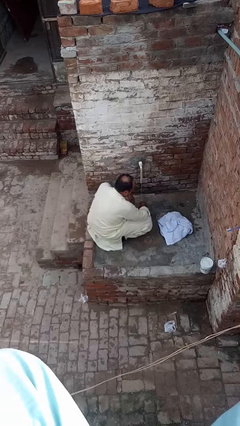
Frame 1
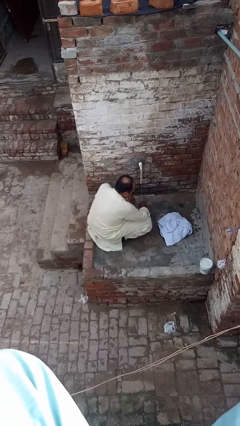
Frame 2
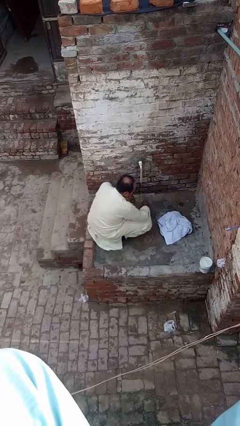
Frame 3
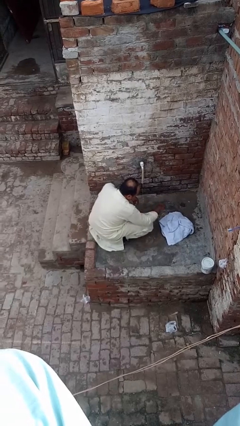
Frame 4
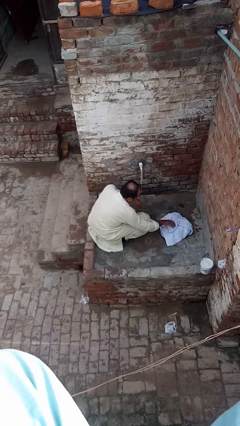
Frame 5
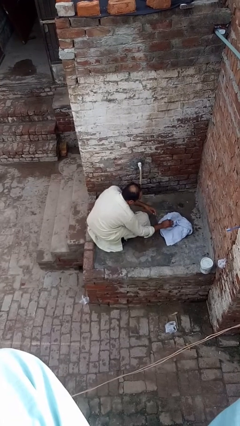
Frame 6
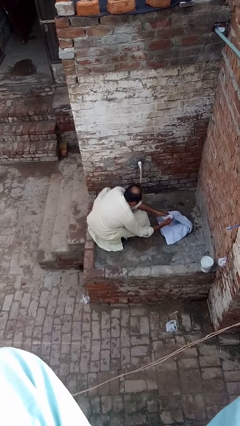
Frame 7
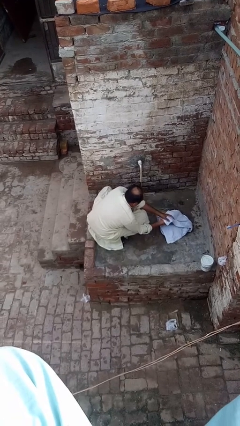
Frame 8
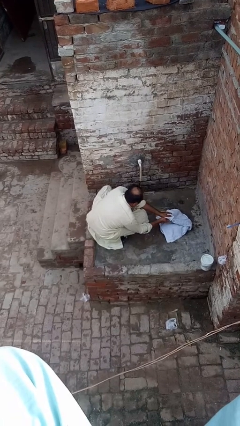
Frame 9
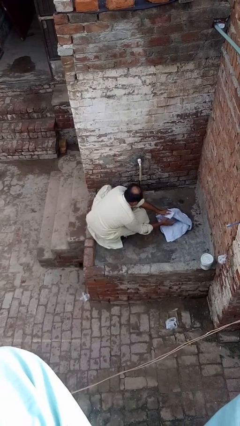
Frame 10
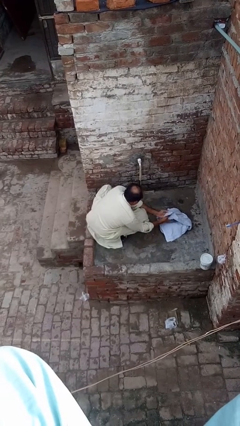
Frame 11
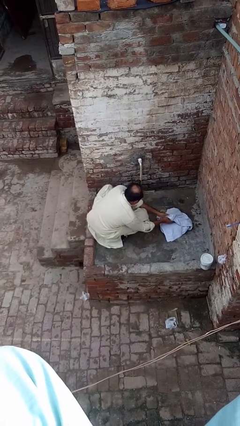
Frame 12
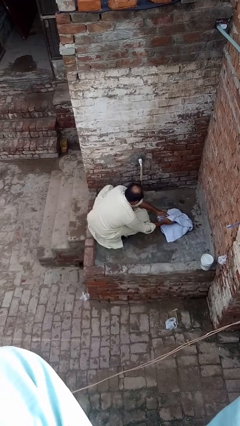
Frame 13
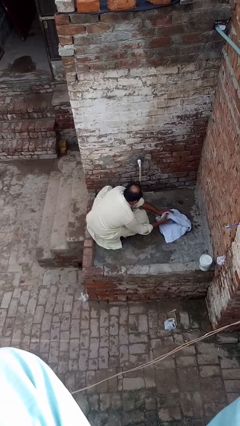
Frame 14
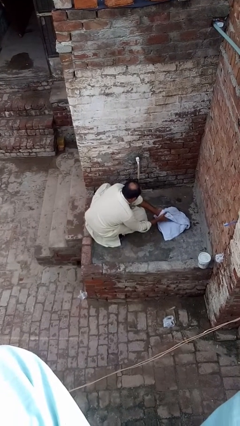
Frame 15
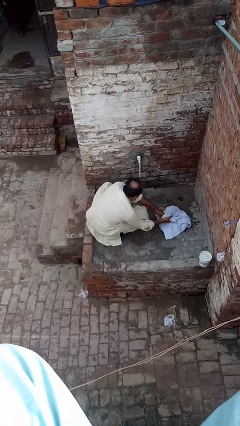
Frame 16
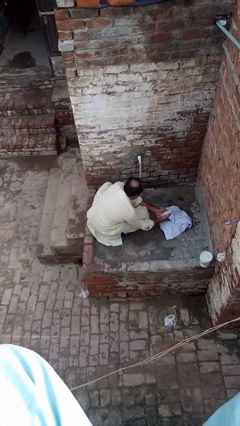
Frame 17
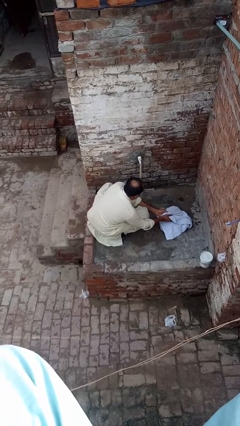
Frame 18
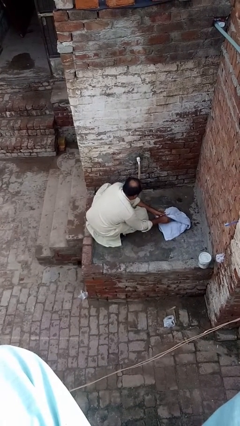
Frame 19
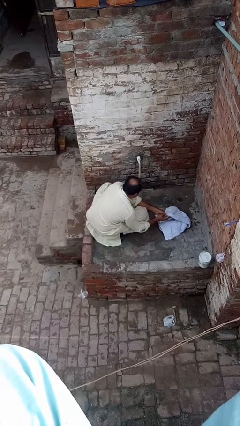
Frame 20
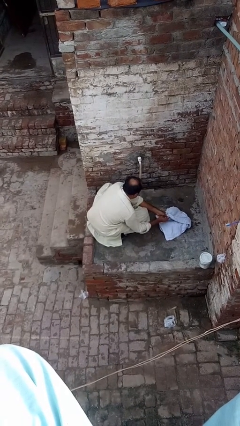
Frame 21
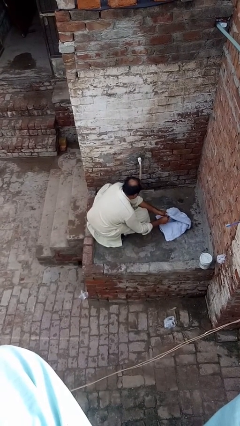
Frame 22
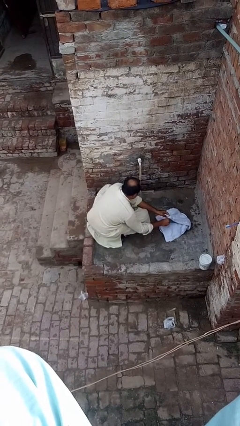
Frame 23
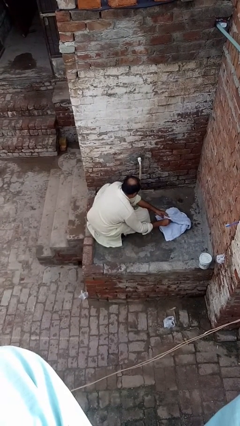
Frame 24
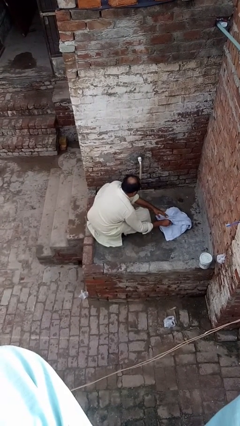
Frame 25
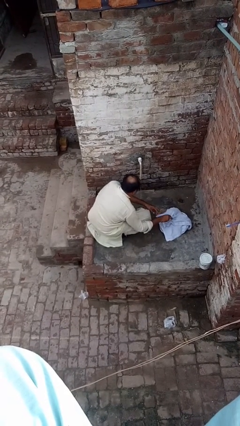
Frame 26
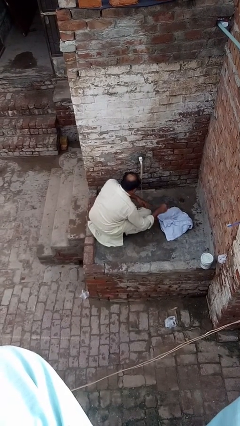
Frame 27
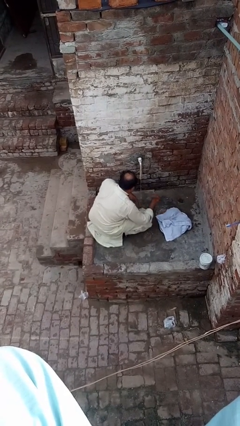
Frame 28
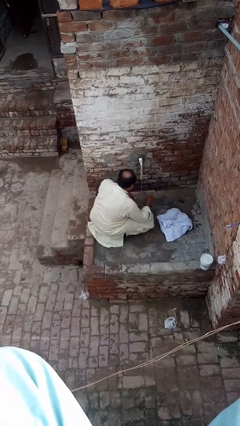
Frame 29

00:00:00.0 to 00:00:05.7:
person dries hands with towel

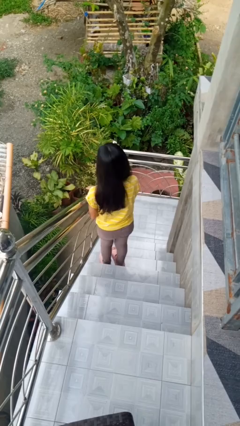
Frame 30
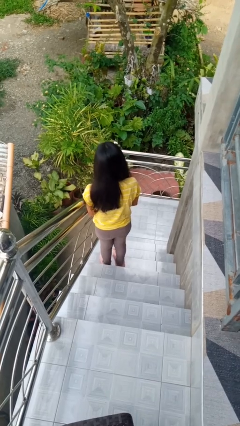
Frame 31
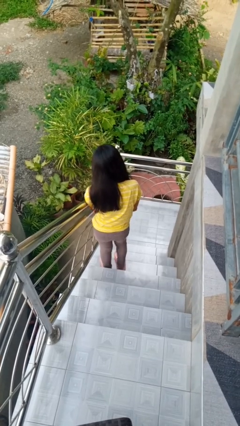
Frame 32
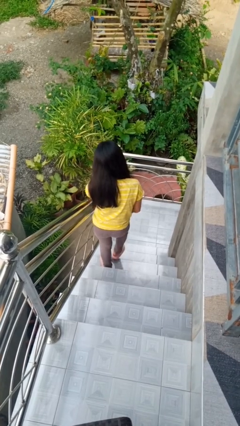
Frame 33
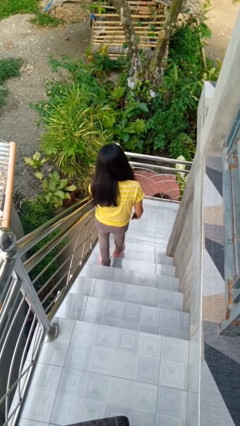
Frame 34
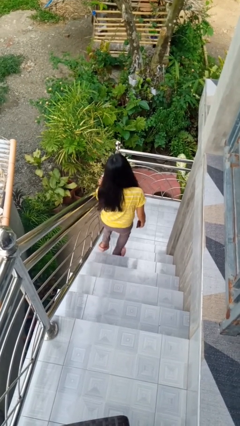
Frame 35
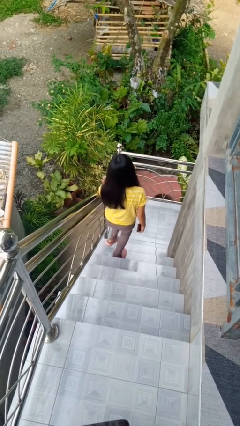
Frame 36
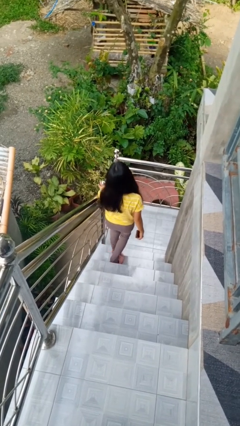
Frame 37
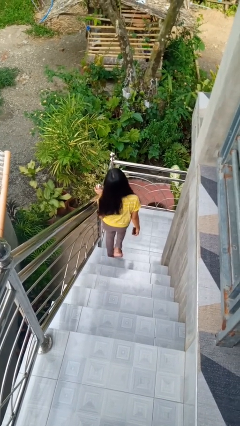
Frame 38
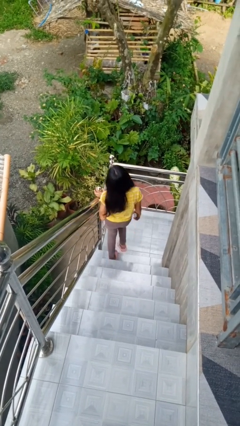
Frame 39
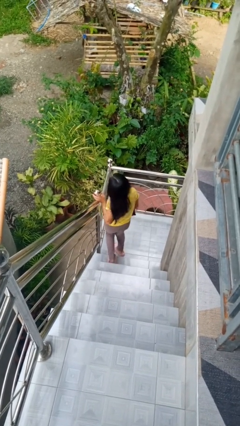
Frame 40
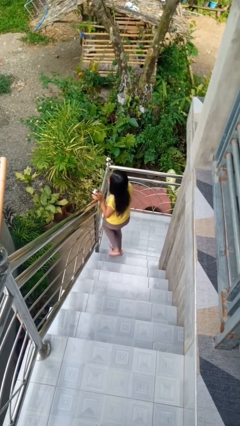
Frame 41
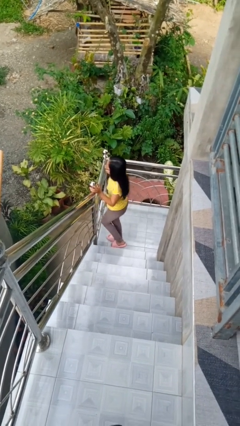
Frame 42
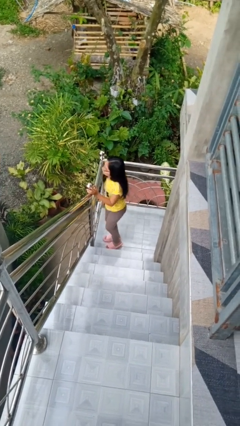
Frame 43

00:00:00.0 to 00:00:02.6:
person climbs down stairs

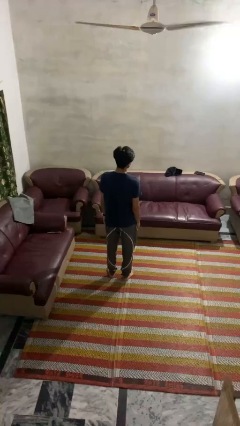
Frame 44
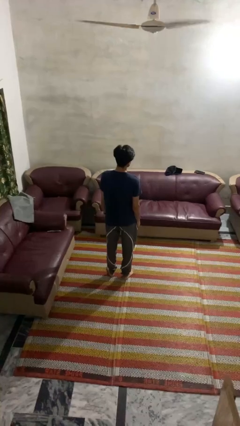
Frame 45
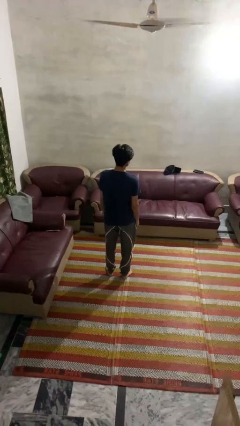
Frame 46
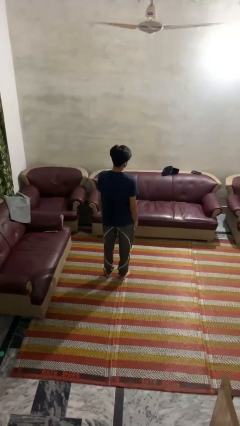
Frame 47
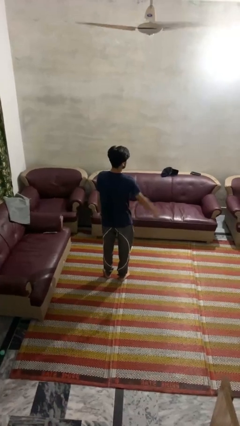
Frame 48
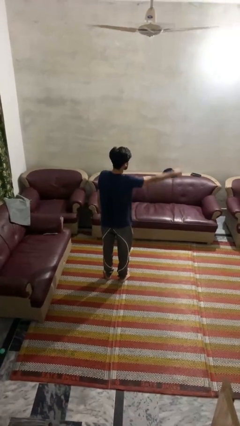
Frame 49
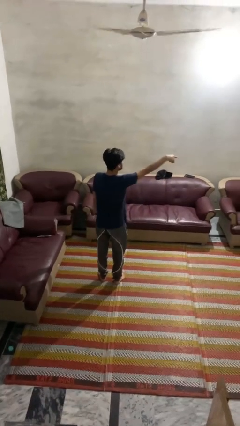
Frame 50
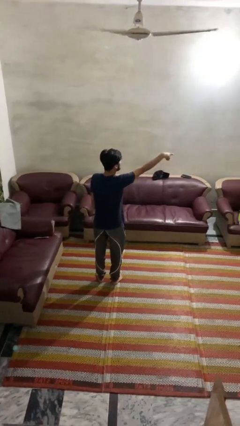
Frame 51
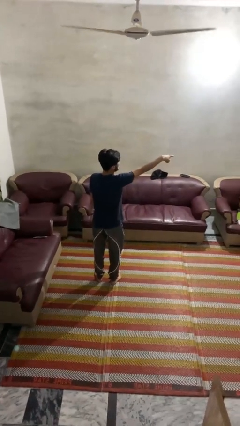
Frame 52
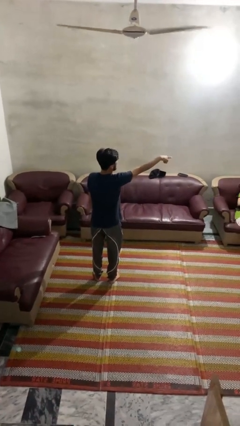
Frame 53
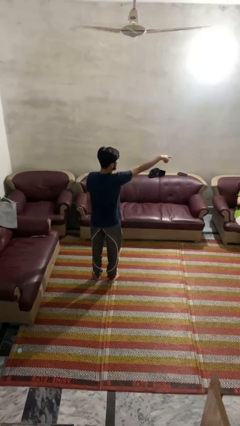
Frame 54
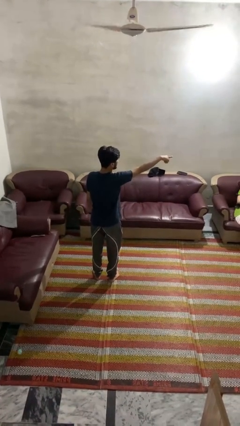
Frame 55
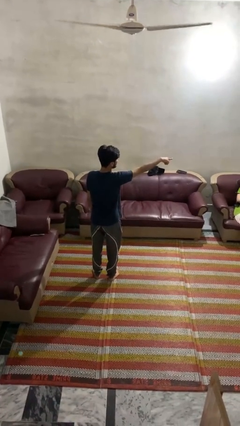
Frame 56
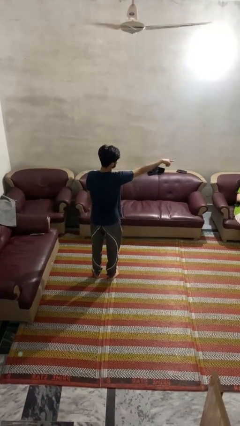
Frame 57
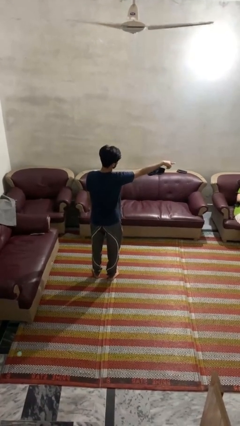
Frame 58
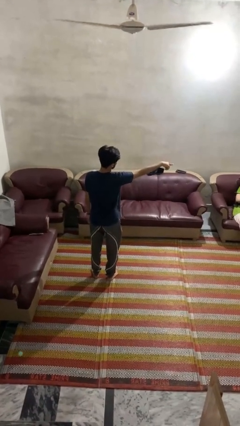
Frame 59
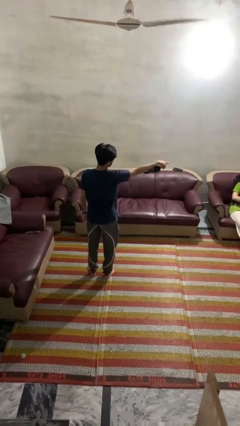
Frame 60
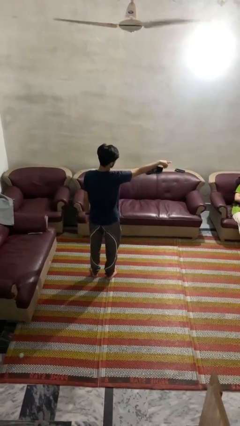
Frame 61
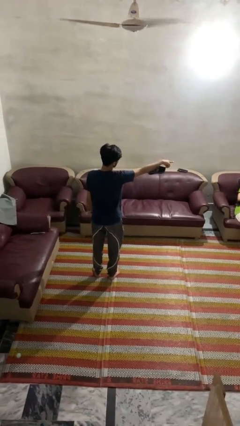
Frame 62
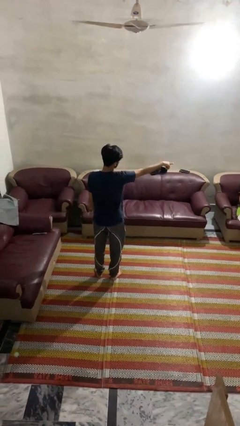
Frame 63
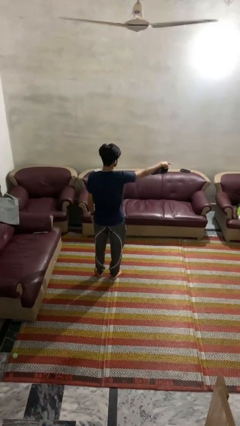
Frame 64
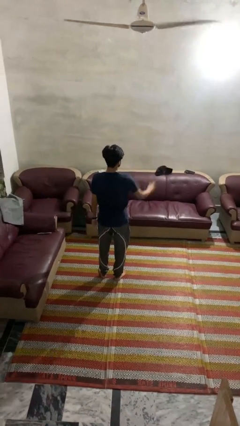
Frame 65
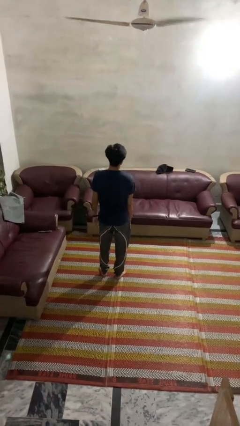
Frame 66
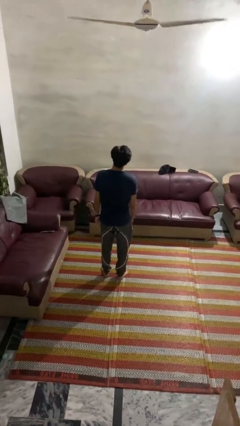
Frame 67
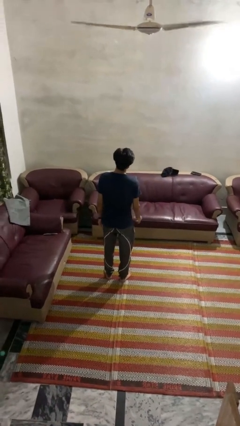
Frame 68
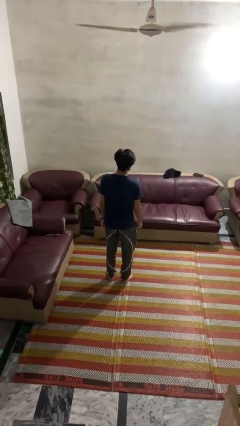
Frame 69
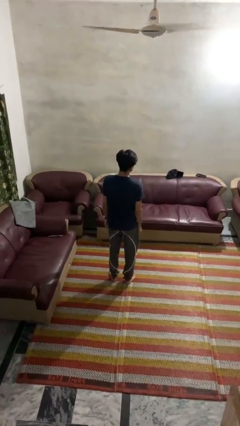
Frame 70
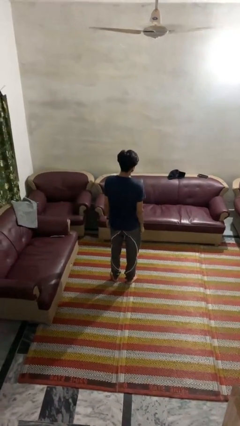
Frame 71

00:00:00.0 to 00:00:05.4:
person points at person

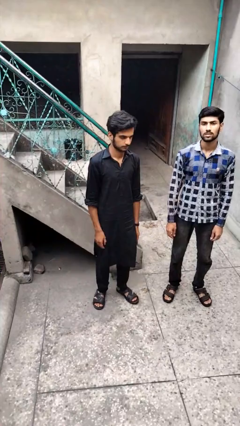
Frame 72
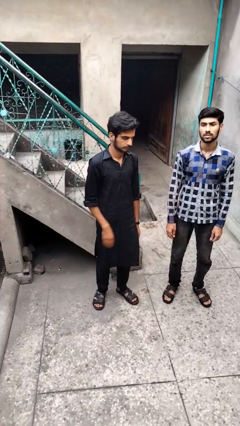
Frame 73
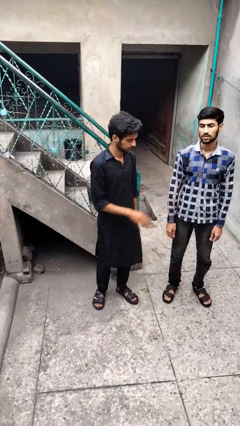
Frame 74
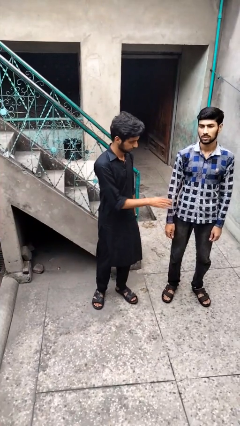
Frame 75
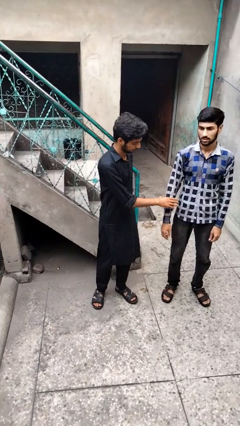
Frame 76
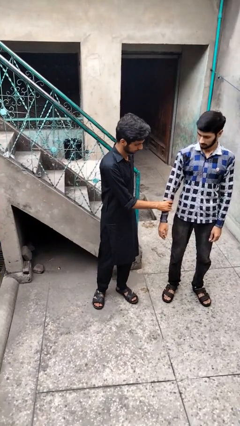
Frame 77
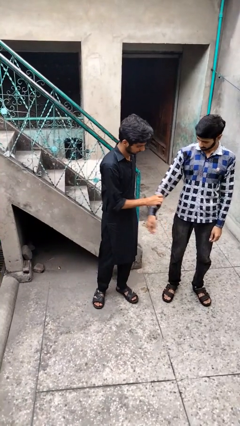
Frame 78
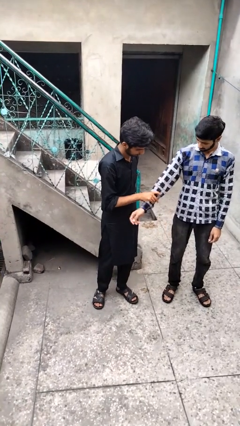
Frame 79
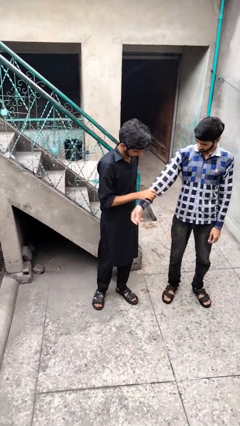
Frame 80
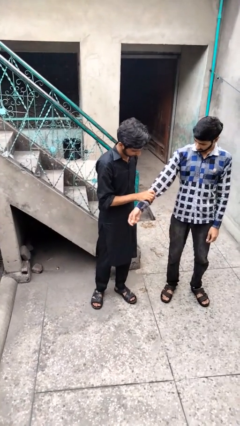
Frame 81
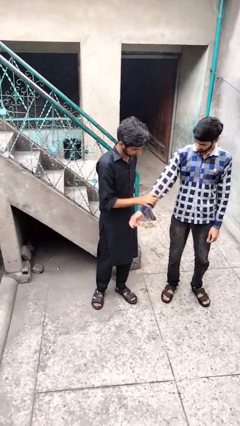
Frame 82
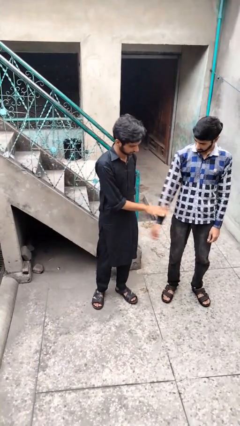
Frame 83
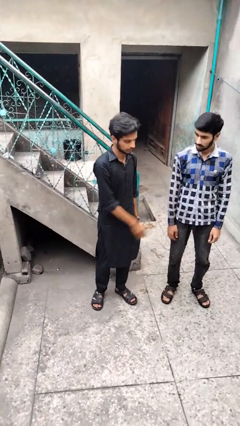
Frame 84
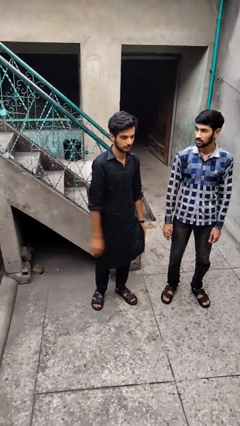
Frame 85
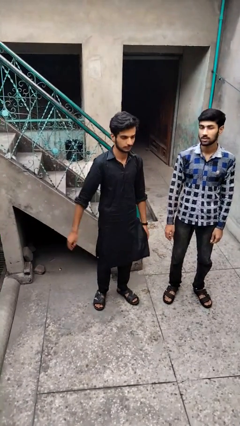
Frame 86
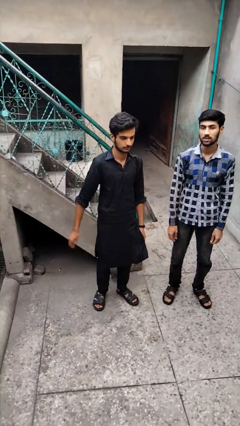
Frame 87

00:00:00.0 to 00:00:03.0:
person grabs person by forearm

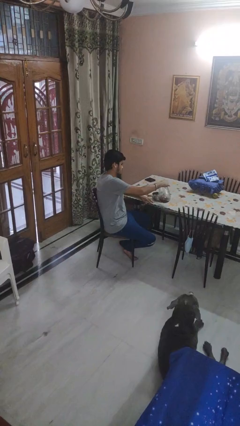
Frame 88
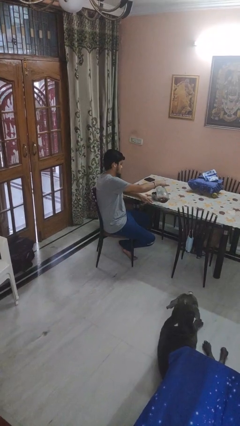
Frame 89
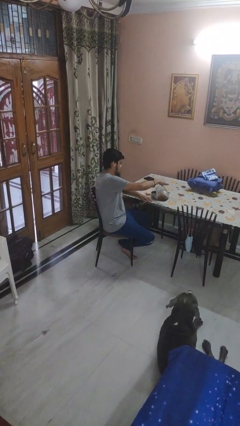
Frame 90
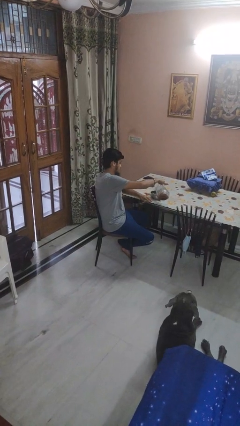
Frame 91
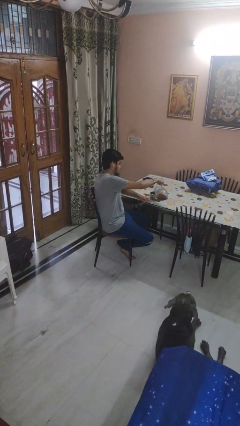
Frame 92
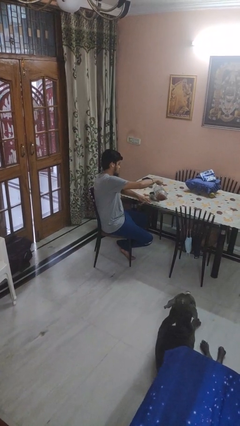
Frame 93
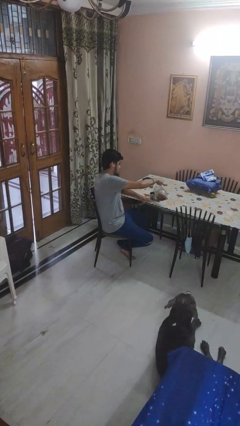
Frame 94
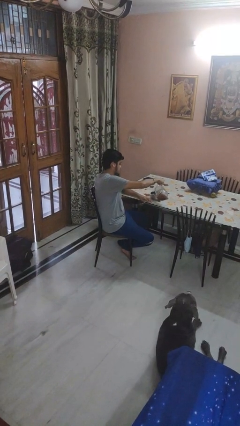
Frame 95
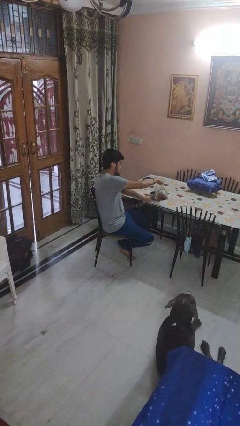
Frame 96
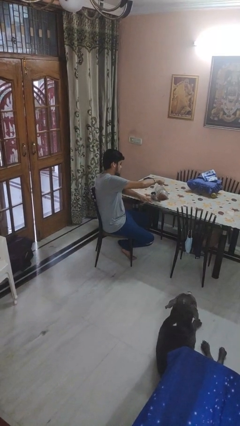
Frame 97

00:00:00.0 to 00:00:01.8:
person pours into bowl
